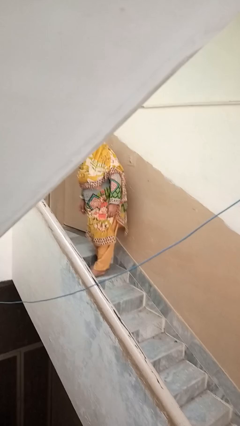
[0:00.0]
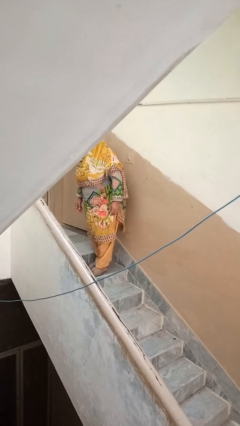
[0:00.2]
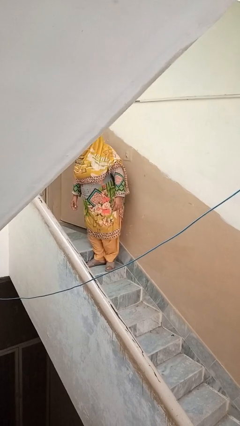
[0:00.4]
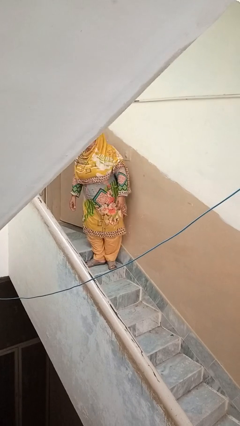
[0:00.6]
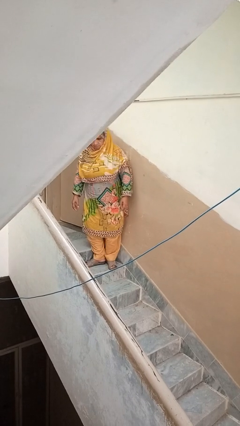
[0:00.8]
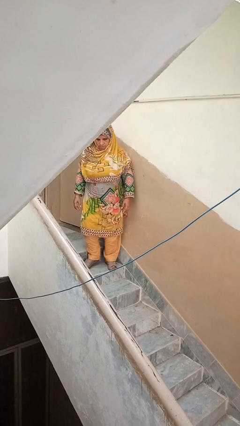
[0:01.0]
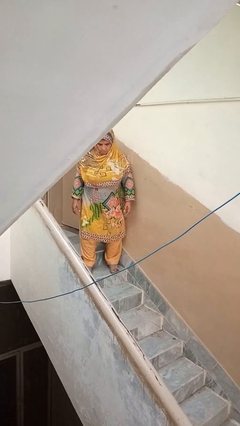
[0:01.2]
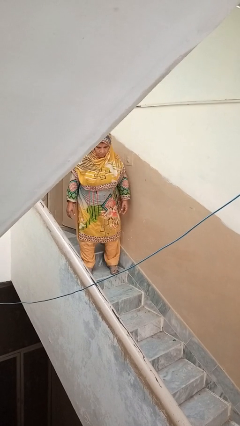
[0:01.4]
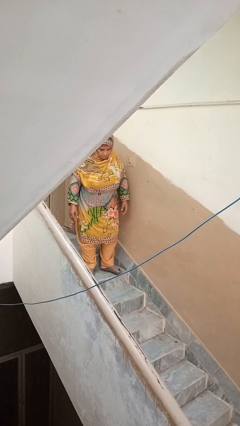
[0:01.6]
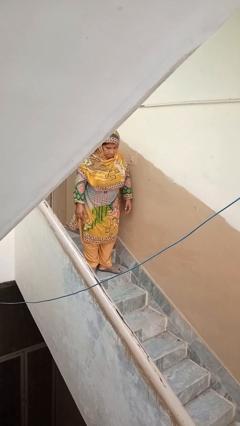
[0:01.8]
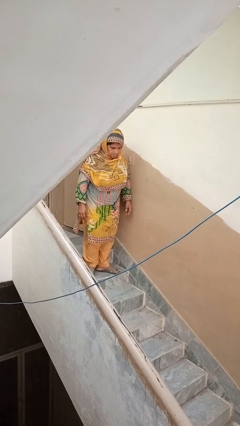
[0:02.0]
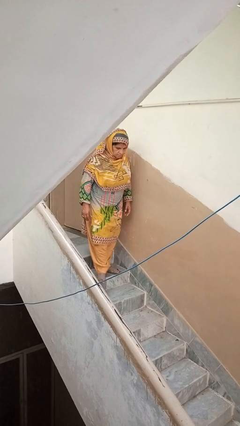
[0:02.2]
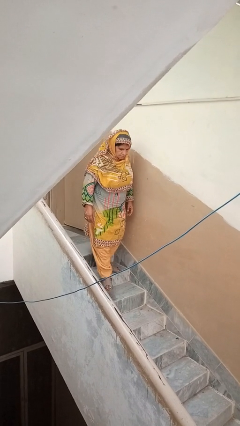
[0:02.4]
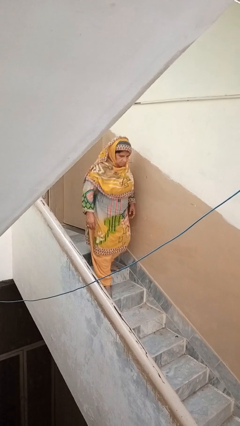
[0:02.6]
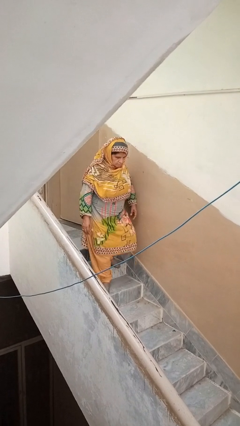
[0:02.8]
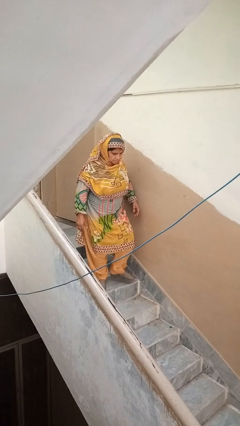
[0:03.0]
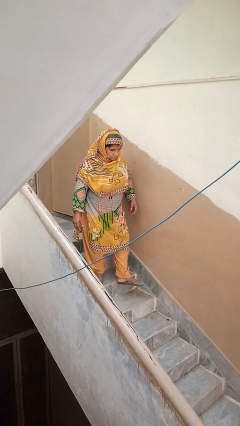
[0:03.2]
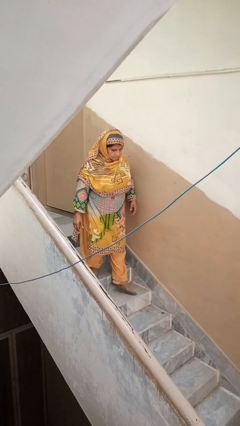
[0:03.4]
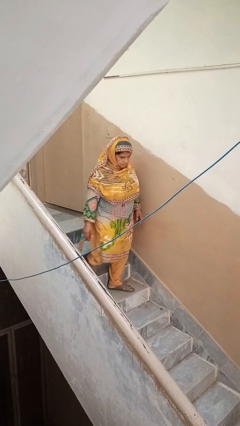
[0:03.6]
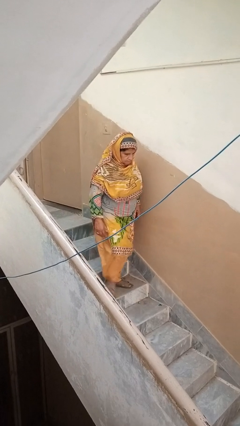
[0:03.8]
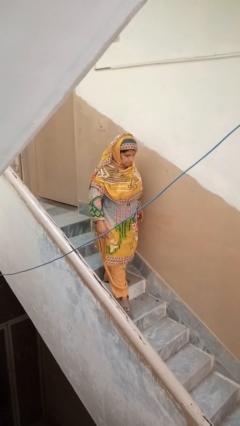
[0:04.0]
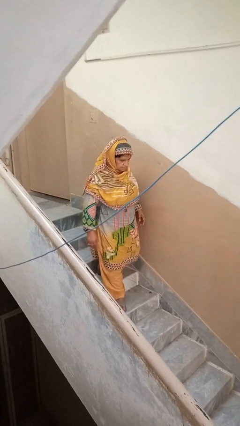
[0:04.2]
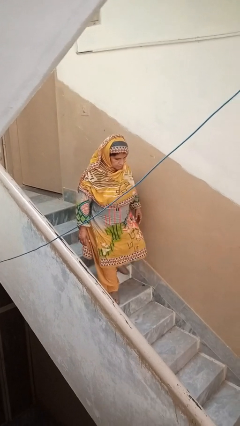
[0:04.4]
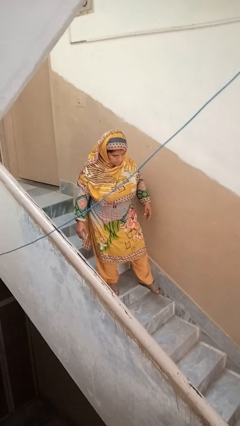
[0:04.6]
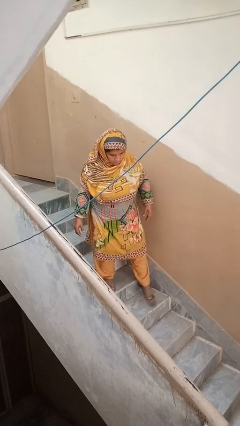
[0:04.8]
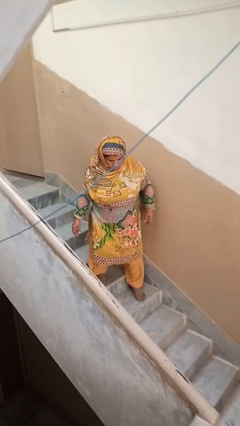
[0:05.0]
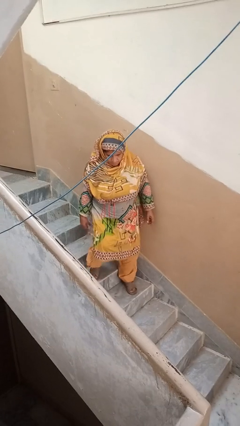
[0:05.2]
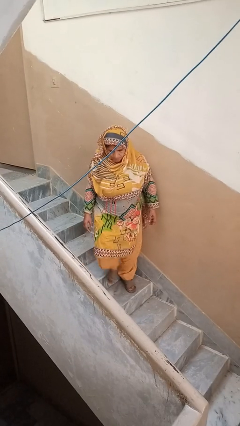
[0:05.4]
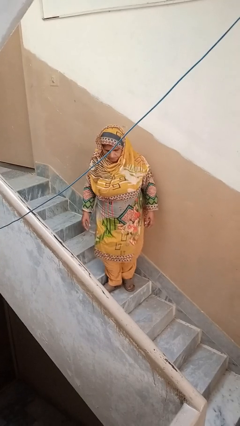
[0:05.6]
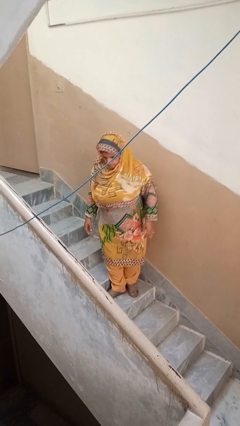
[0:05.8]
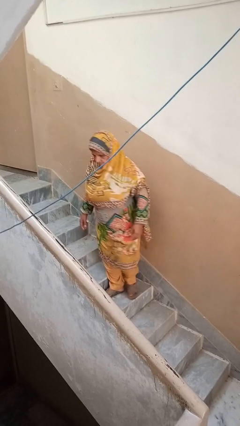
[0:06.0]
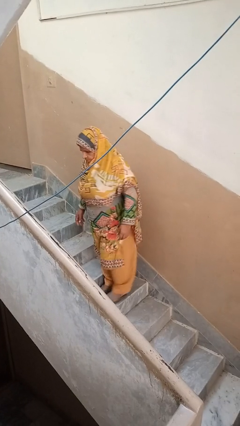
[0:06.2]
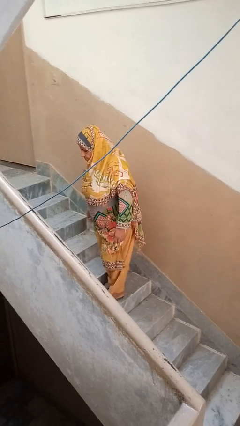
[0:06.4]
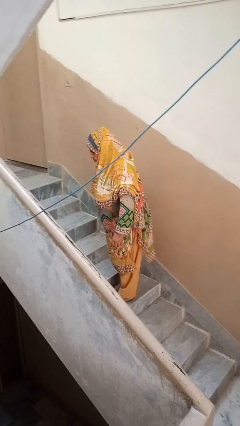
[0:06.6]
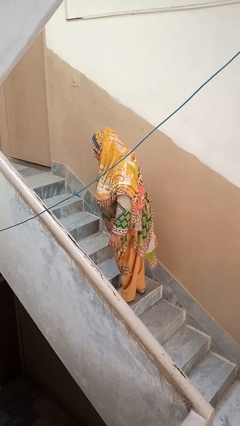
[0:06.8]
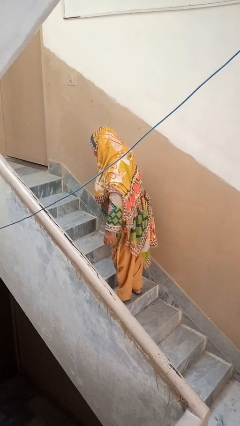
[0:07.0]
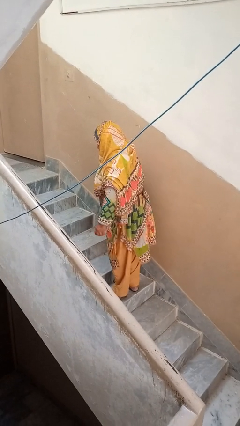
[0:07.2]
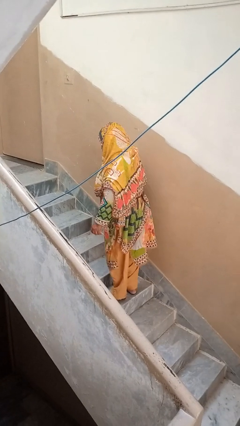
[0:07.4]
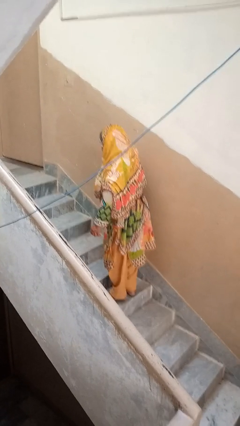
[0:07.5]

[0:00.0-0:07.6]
person climbs down stairs

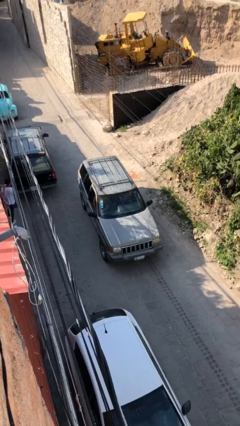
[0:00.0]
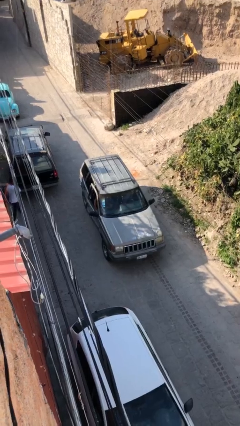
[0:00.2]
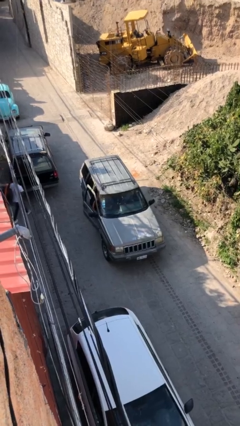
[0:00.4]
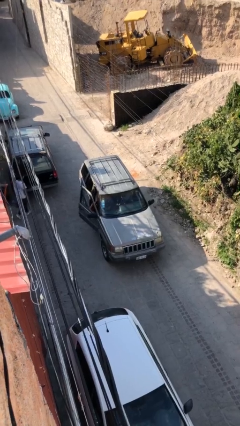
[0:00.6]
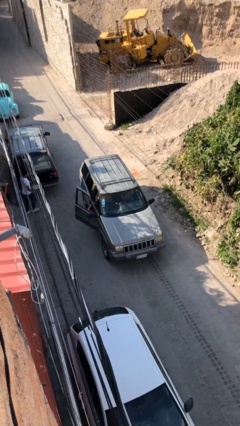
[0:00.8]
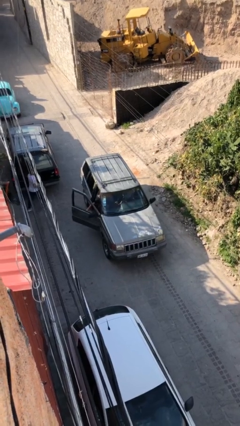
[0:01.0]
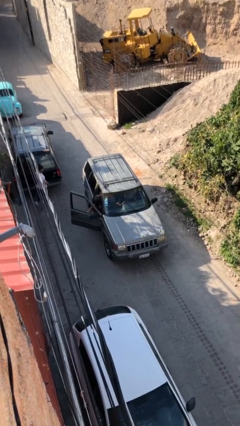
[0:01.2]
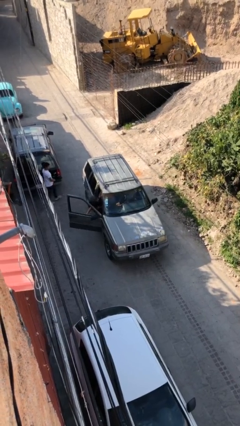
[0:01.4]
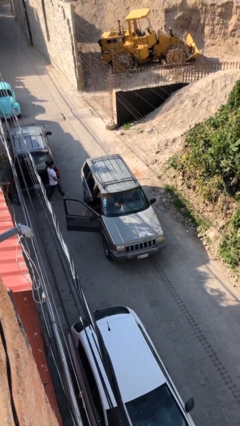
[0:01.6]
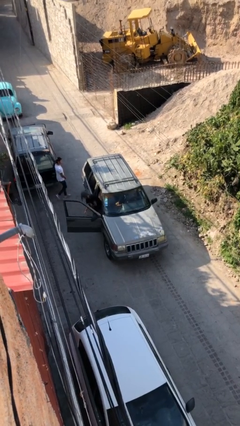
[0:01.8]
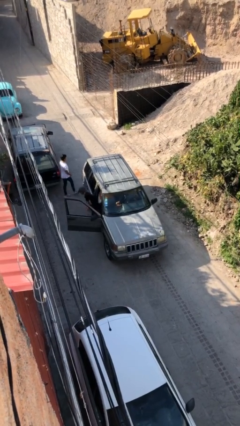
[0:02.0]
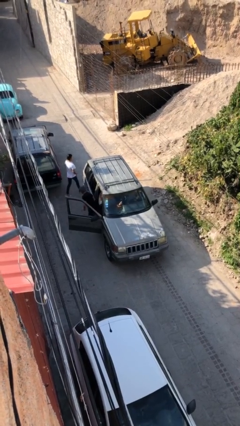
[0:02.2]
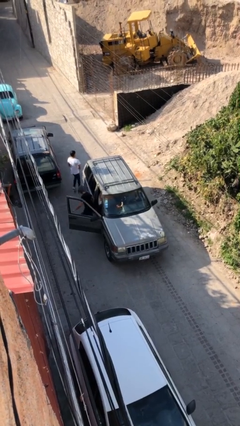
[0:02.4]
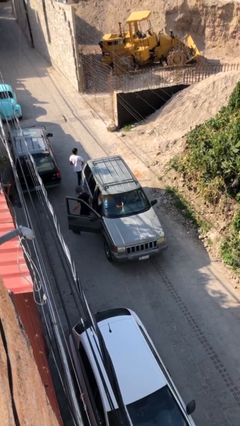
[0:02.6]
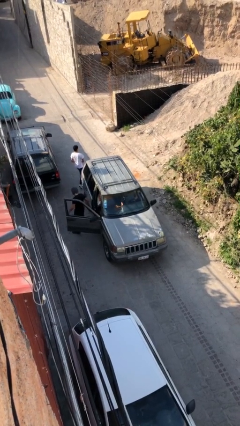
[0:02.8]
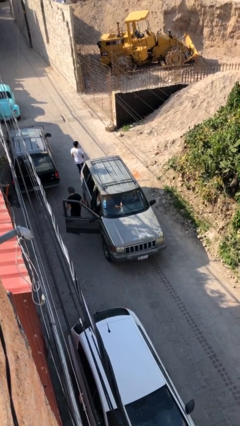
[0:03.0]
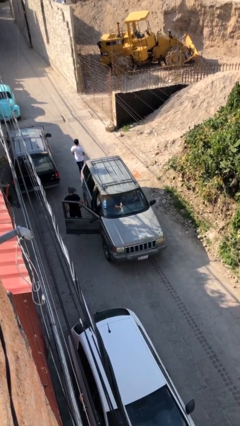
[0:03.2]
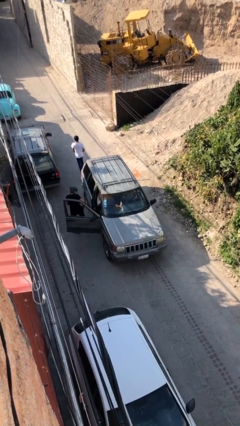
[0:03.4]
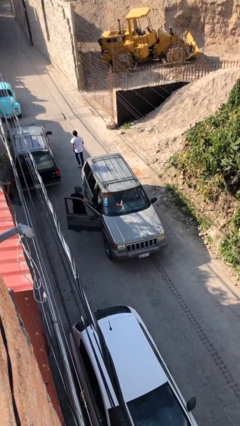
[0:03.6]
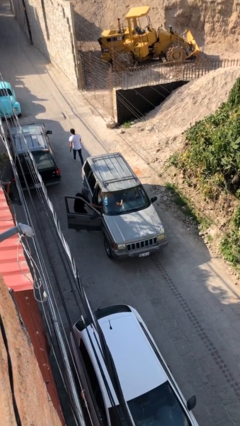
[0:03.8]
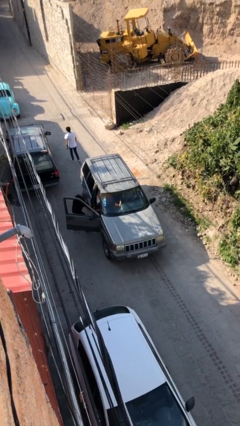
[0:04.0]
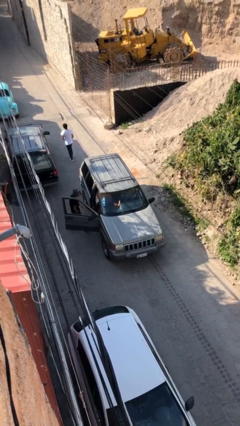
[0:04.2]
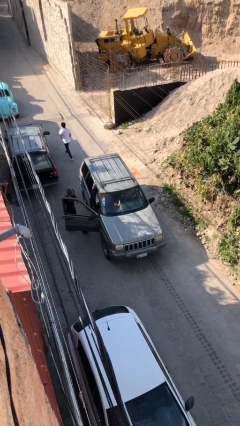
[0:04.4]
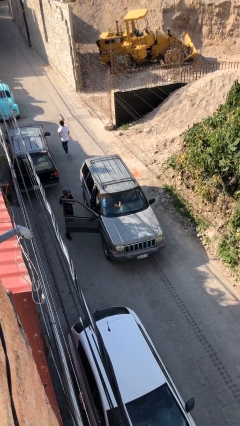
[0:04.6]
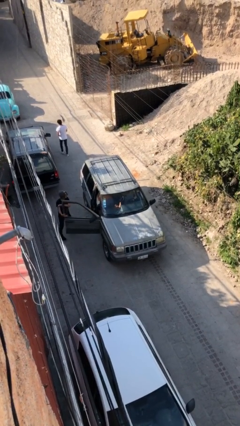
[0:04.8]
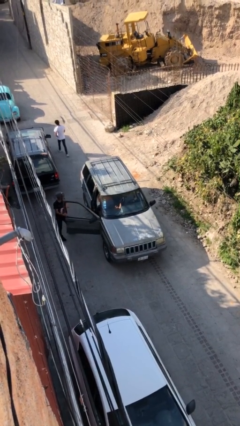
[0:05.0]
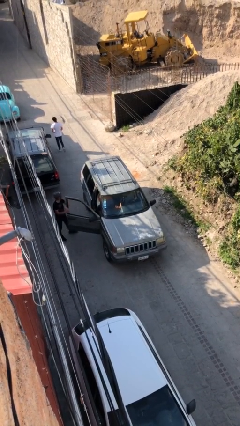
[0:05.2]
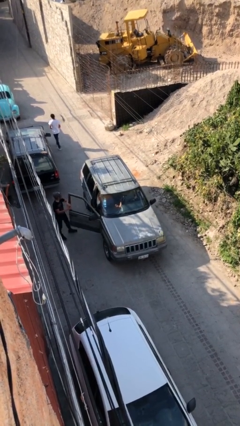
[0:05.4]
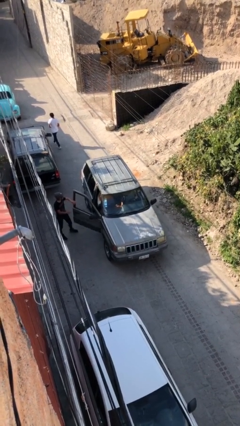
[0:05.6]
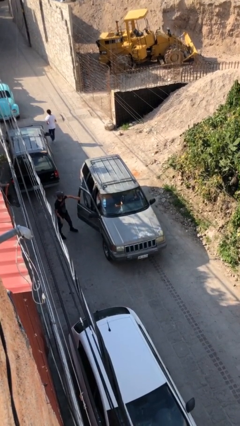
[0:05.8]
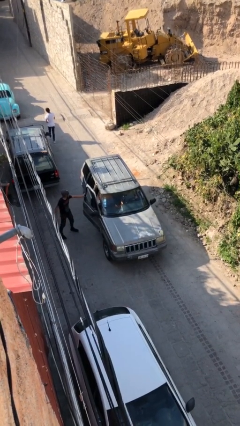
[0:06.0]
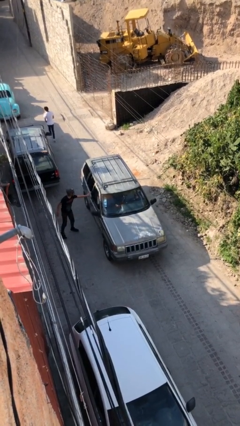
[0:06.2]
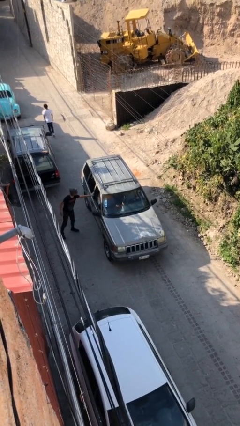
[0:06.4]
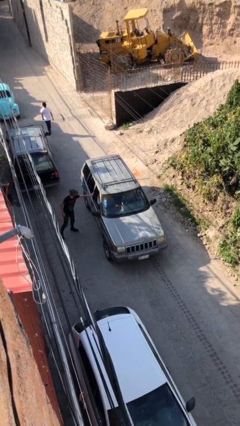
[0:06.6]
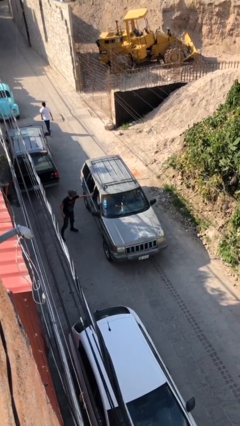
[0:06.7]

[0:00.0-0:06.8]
car drops off person

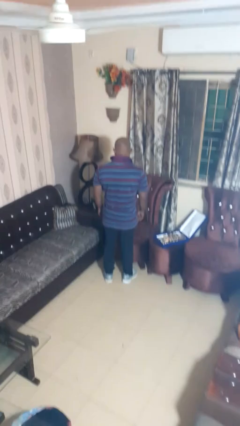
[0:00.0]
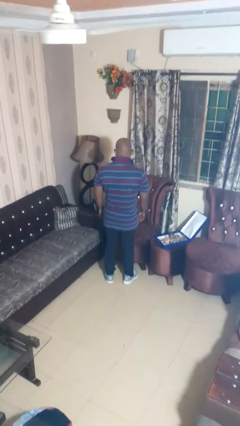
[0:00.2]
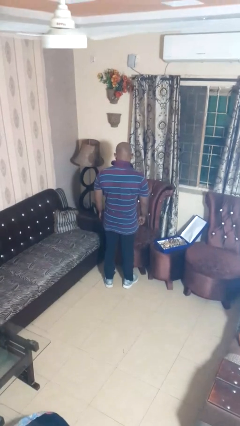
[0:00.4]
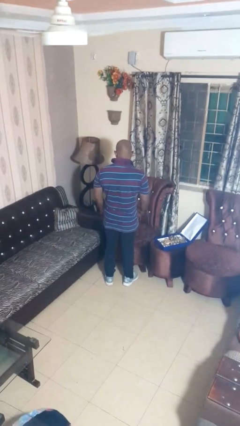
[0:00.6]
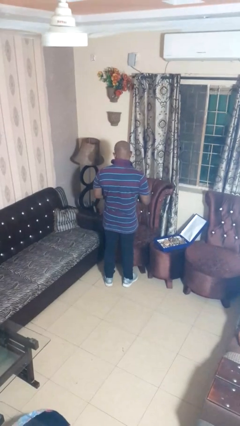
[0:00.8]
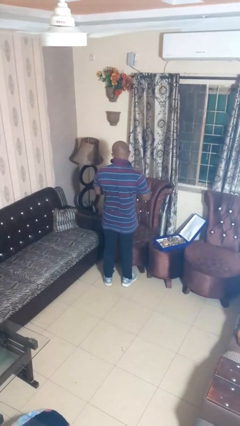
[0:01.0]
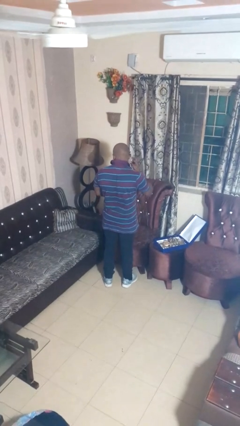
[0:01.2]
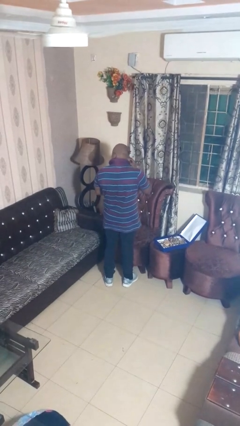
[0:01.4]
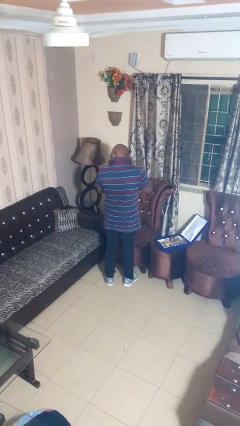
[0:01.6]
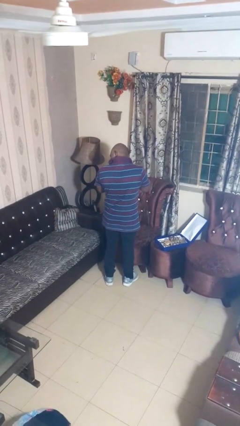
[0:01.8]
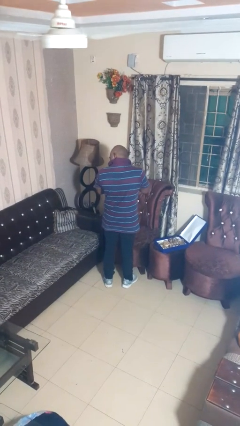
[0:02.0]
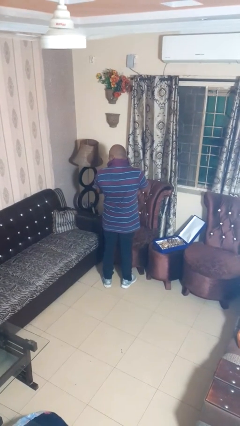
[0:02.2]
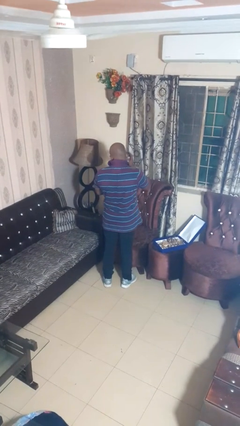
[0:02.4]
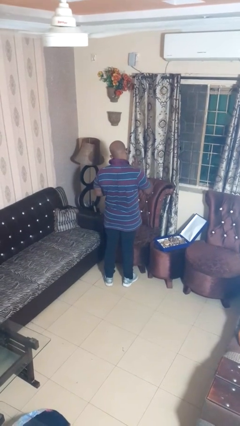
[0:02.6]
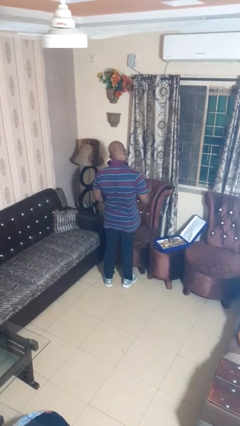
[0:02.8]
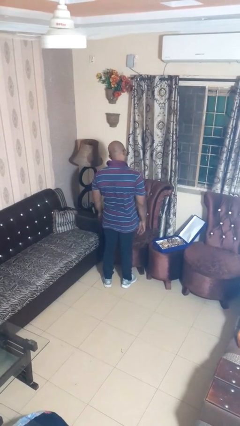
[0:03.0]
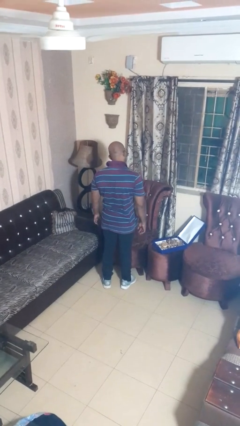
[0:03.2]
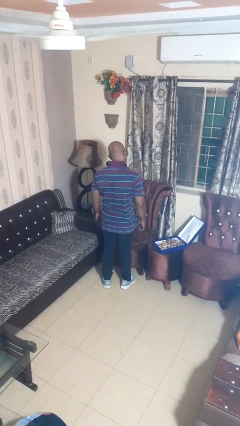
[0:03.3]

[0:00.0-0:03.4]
person puts on earrings
